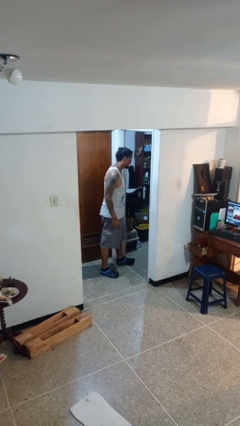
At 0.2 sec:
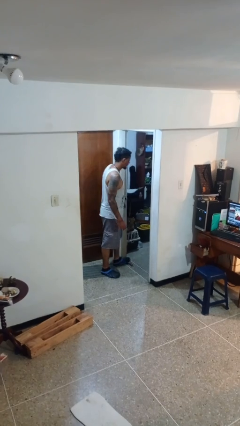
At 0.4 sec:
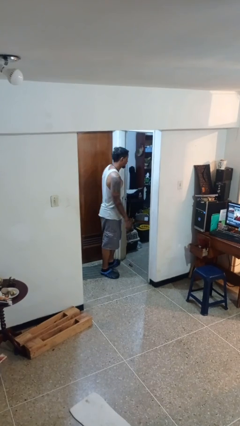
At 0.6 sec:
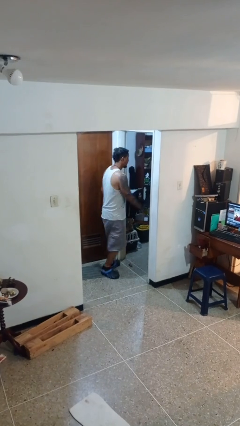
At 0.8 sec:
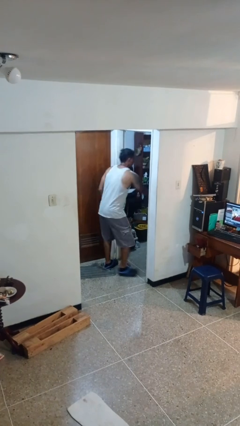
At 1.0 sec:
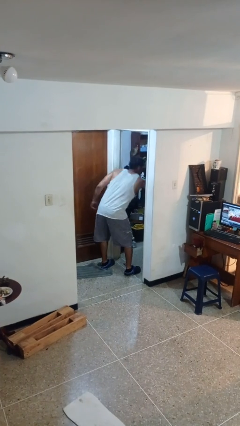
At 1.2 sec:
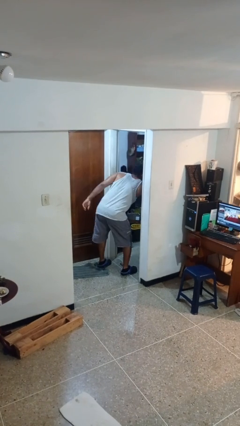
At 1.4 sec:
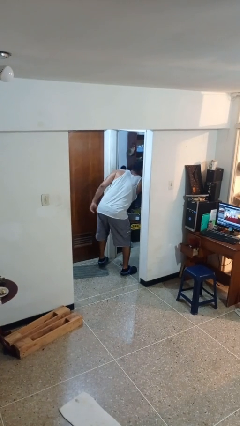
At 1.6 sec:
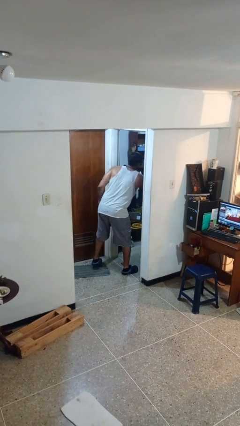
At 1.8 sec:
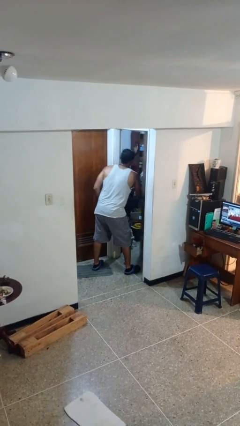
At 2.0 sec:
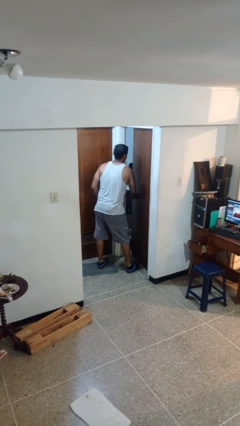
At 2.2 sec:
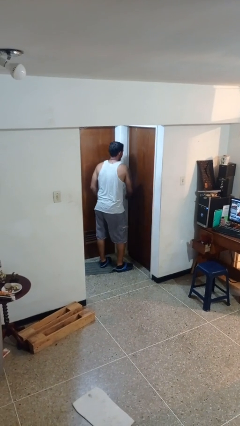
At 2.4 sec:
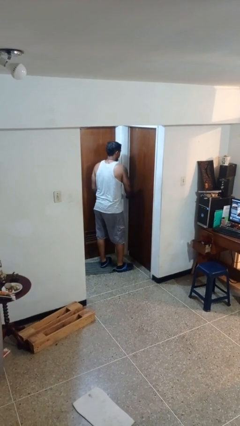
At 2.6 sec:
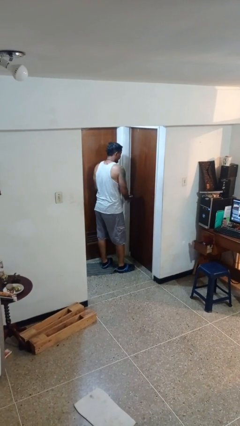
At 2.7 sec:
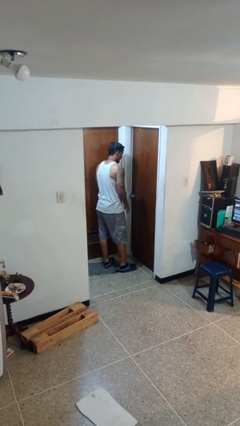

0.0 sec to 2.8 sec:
person closes gate

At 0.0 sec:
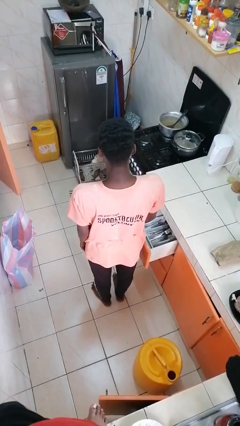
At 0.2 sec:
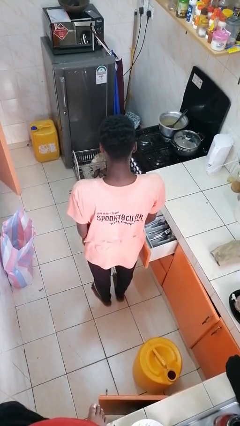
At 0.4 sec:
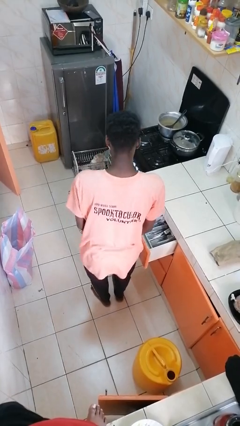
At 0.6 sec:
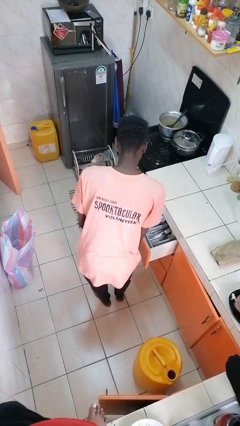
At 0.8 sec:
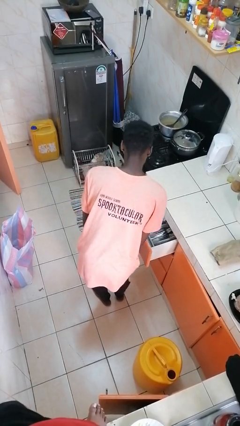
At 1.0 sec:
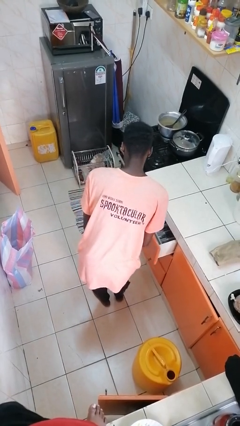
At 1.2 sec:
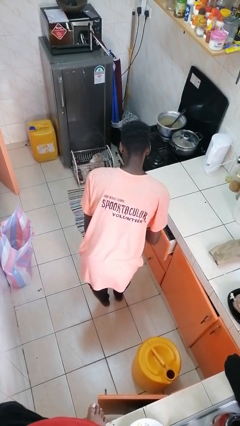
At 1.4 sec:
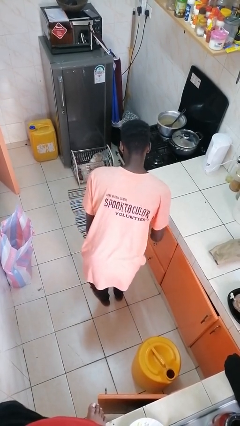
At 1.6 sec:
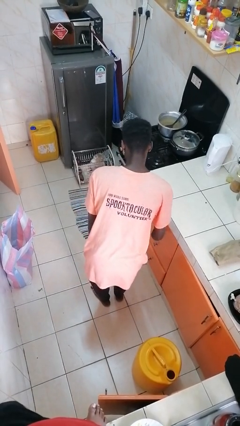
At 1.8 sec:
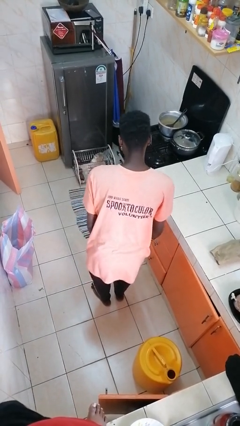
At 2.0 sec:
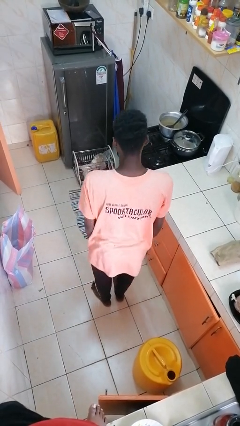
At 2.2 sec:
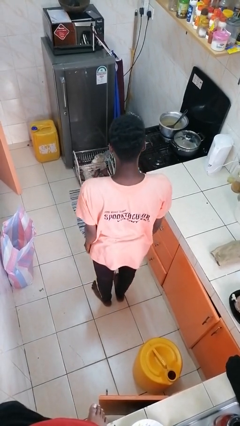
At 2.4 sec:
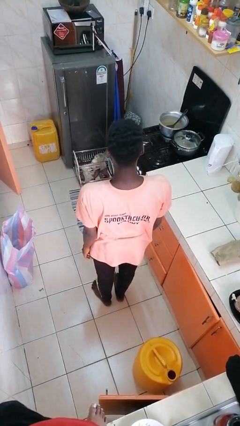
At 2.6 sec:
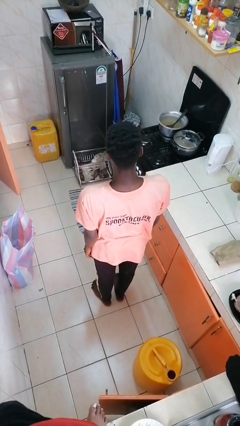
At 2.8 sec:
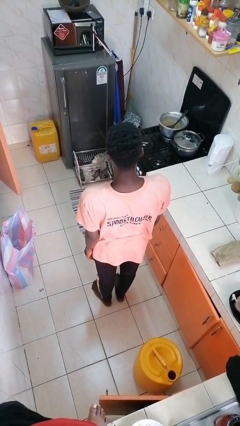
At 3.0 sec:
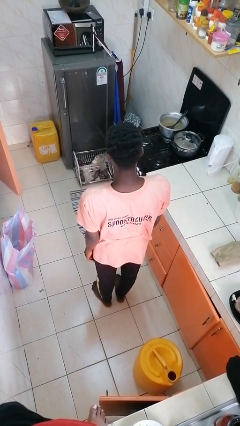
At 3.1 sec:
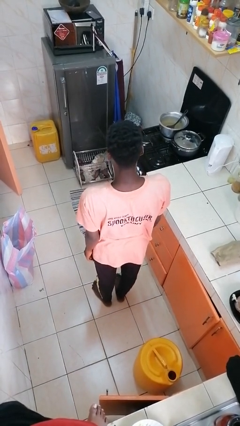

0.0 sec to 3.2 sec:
person closes kitchen drawer

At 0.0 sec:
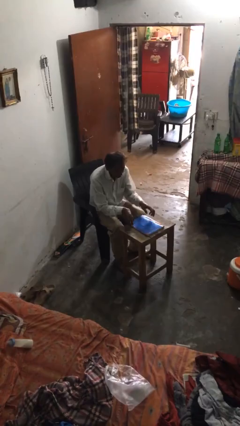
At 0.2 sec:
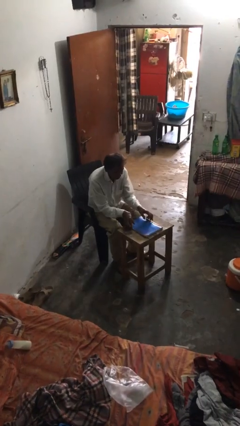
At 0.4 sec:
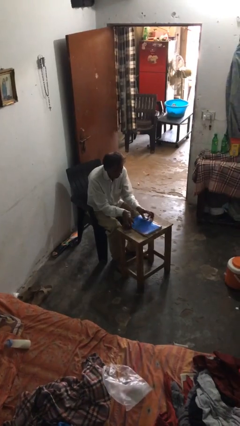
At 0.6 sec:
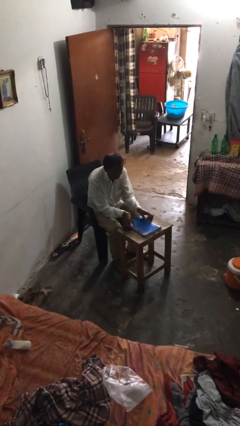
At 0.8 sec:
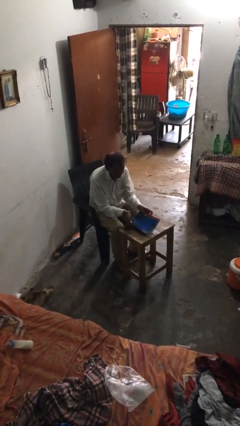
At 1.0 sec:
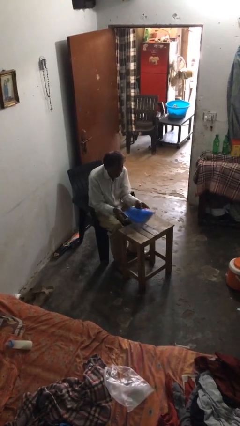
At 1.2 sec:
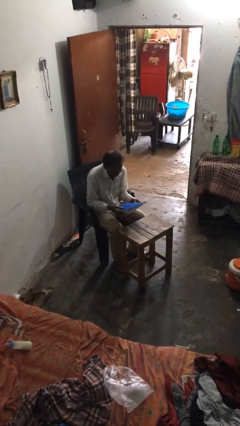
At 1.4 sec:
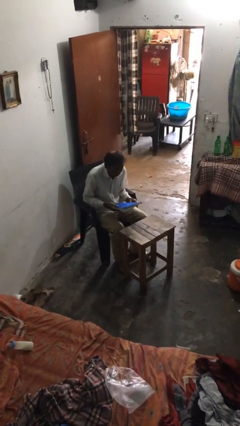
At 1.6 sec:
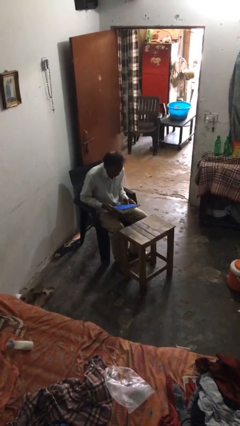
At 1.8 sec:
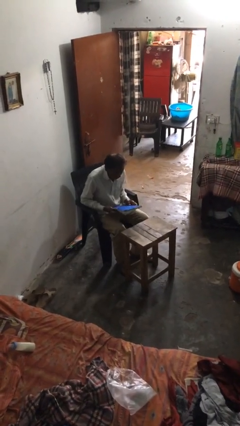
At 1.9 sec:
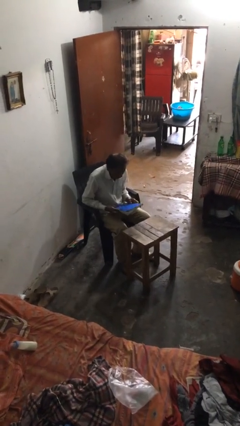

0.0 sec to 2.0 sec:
person picks up object from table

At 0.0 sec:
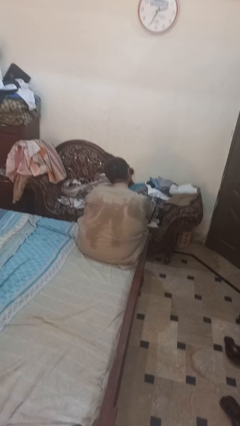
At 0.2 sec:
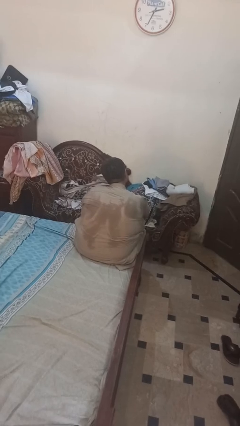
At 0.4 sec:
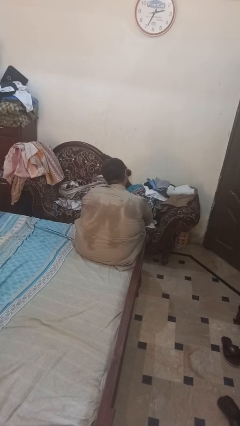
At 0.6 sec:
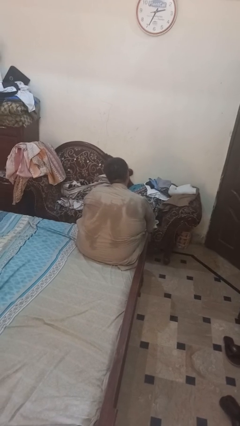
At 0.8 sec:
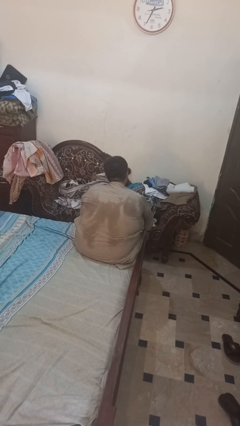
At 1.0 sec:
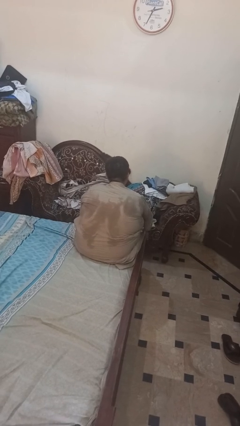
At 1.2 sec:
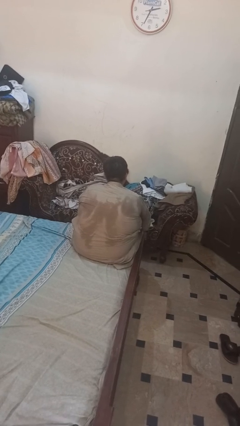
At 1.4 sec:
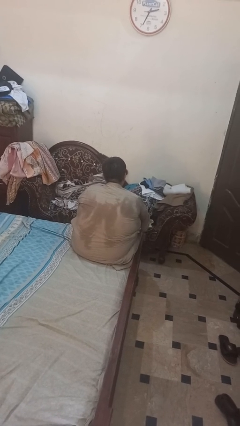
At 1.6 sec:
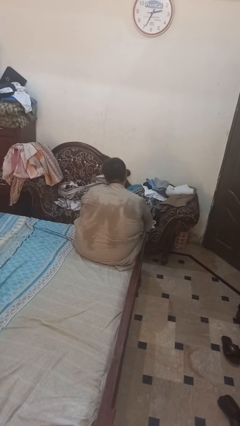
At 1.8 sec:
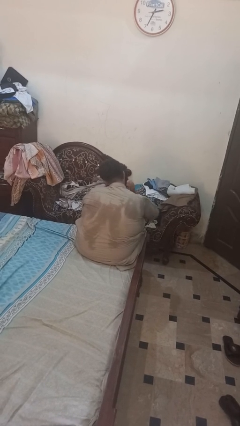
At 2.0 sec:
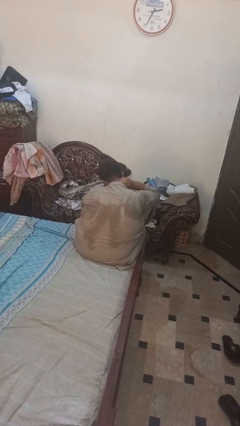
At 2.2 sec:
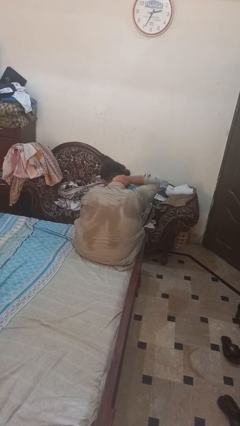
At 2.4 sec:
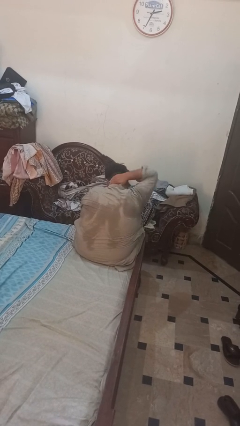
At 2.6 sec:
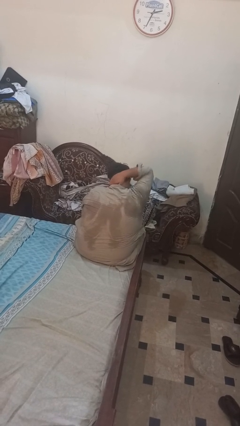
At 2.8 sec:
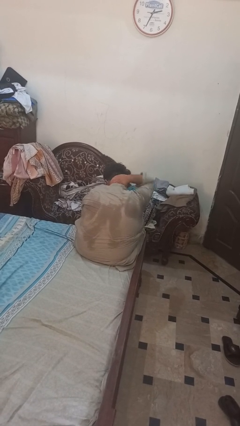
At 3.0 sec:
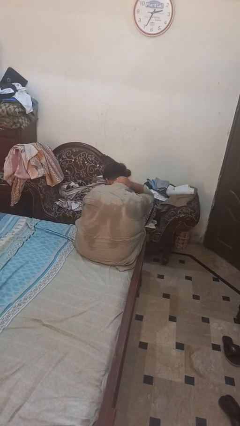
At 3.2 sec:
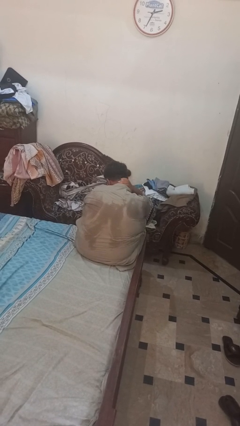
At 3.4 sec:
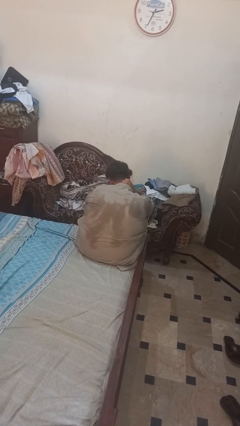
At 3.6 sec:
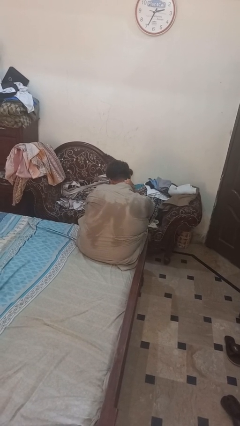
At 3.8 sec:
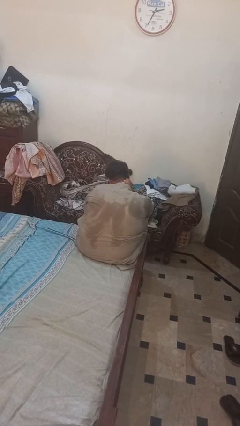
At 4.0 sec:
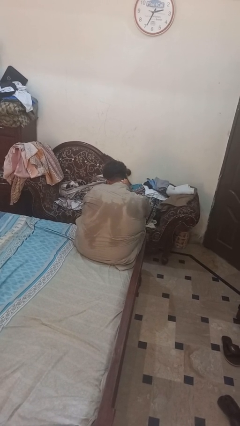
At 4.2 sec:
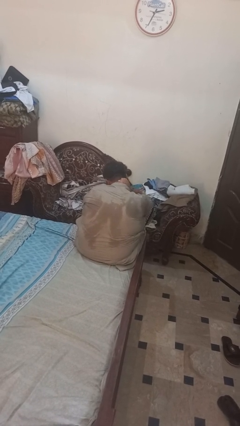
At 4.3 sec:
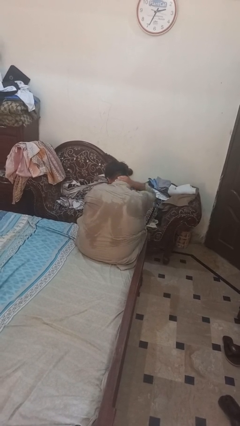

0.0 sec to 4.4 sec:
person rubs neck

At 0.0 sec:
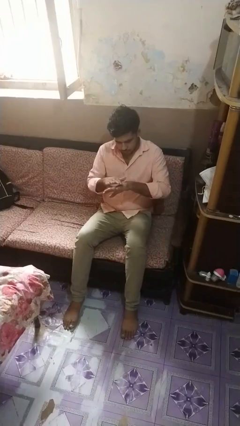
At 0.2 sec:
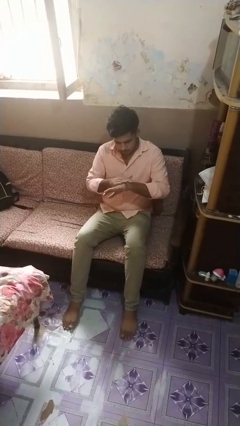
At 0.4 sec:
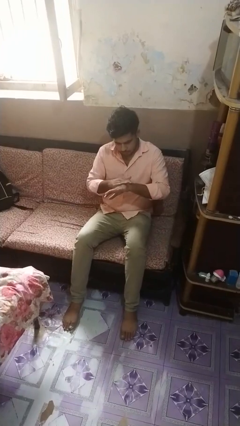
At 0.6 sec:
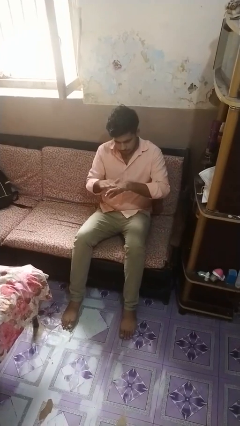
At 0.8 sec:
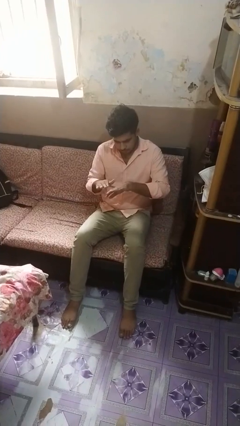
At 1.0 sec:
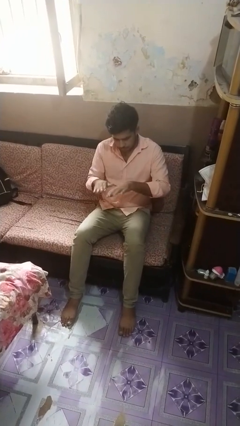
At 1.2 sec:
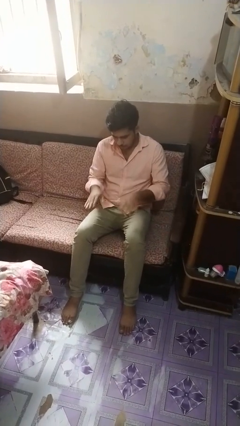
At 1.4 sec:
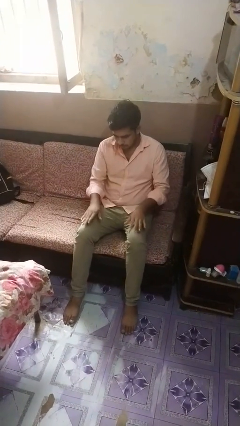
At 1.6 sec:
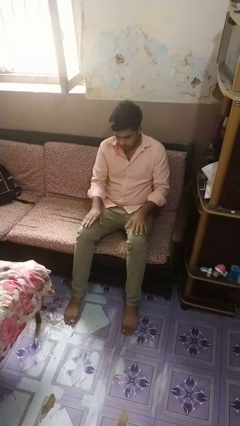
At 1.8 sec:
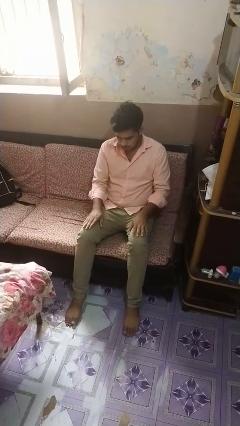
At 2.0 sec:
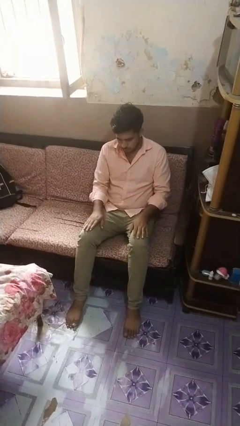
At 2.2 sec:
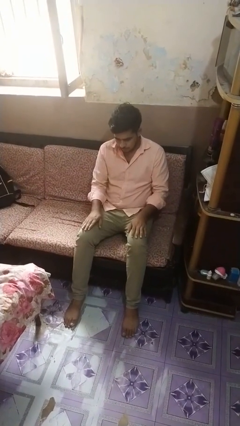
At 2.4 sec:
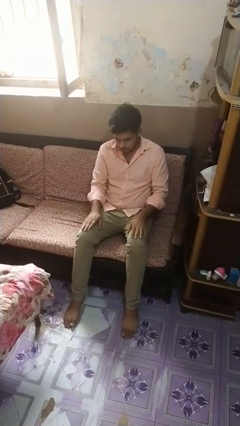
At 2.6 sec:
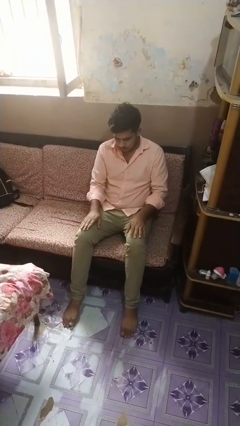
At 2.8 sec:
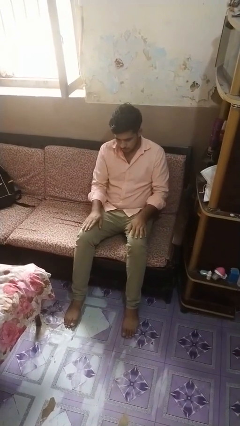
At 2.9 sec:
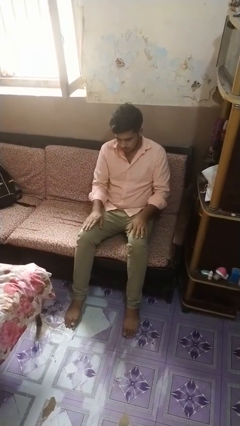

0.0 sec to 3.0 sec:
person looks at hands in lap

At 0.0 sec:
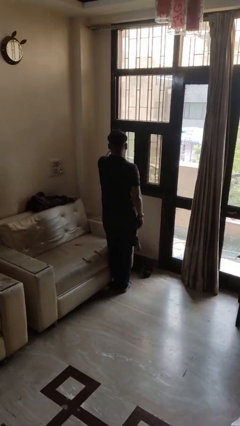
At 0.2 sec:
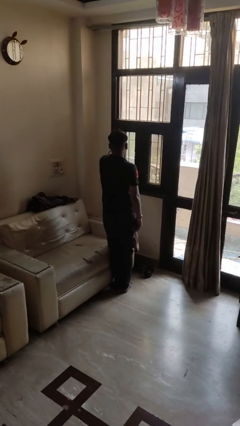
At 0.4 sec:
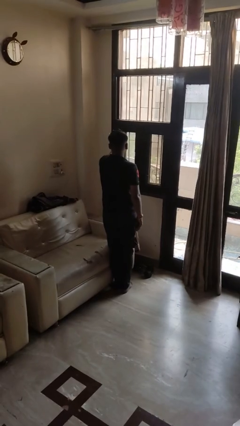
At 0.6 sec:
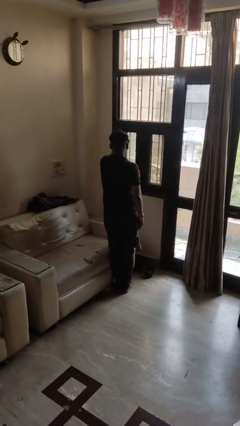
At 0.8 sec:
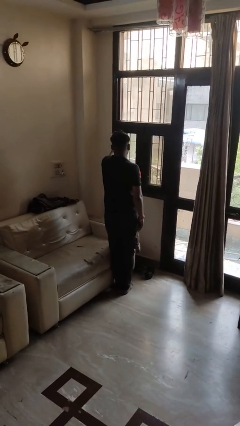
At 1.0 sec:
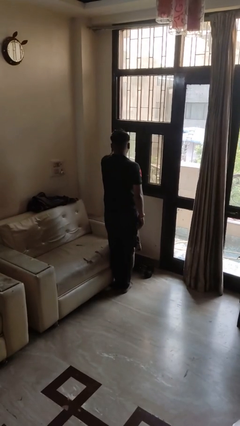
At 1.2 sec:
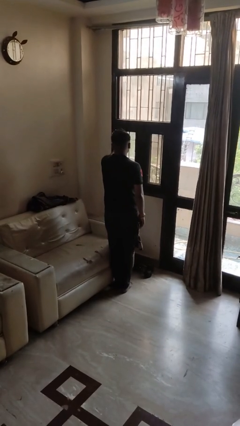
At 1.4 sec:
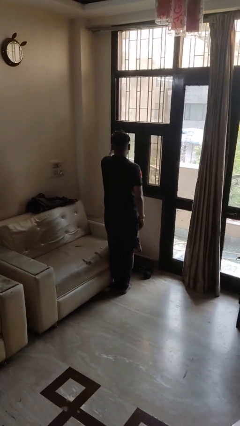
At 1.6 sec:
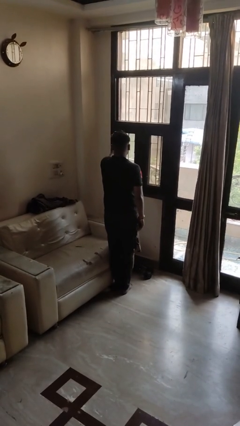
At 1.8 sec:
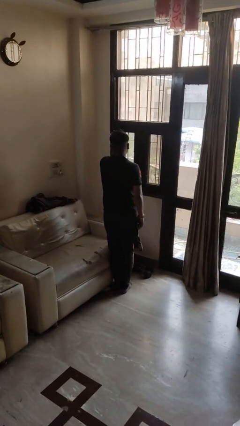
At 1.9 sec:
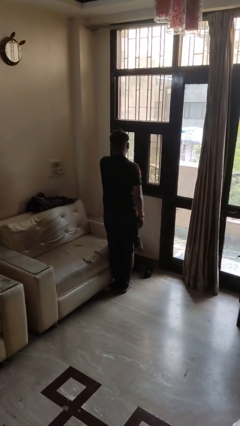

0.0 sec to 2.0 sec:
person sprays from bottle
